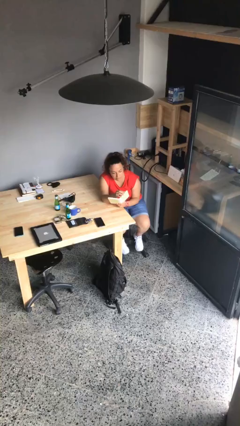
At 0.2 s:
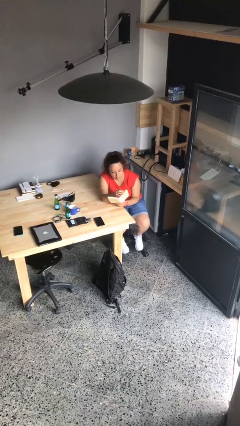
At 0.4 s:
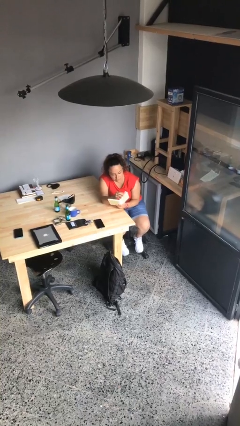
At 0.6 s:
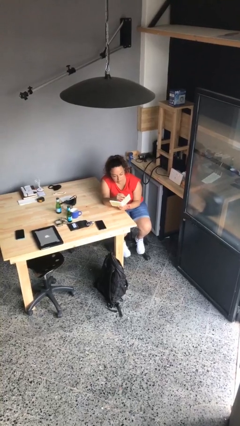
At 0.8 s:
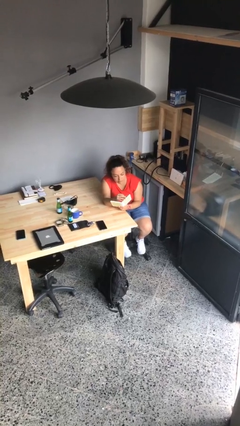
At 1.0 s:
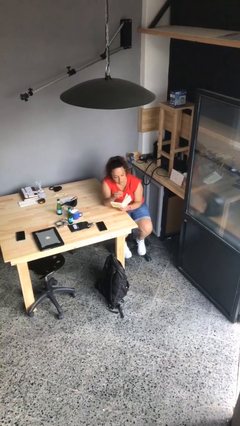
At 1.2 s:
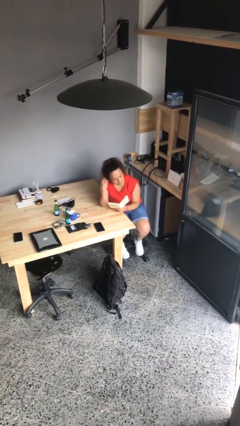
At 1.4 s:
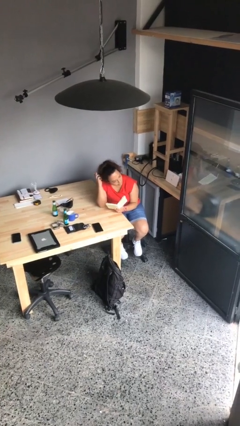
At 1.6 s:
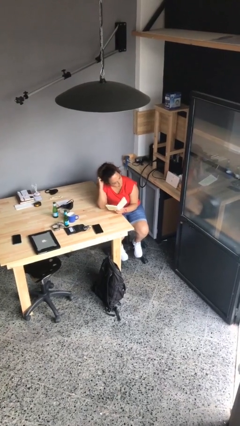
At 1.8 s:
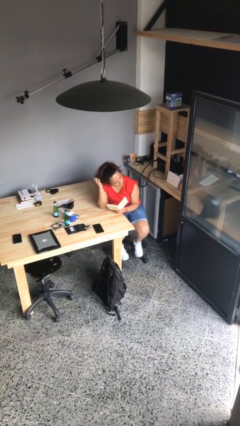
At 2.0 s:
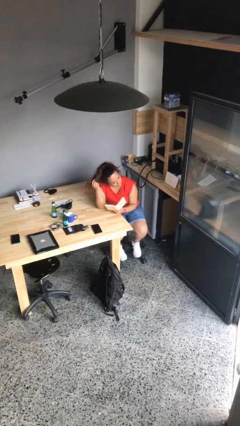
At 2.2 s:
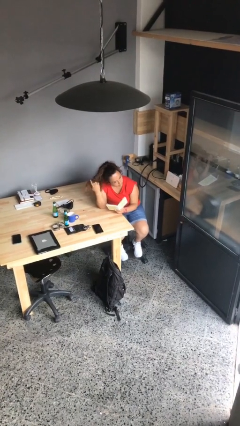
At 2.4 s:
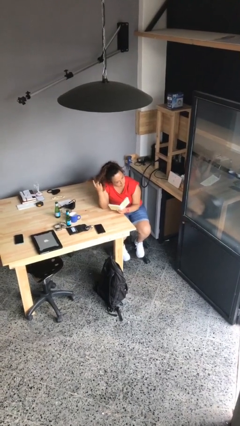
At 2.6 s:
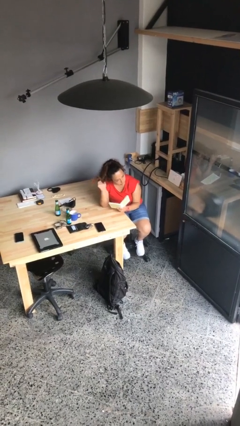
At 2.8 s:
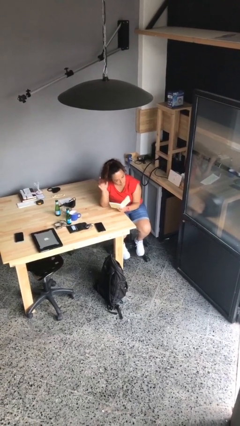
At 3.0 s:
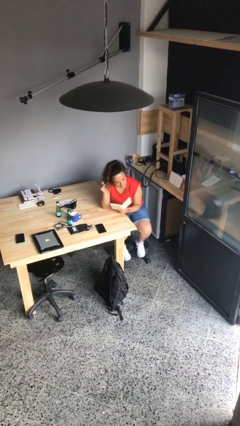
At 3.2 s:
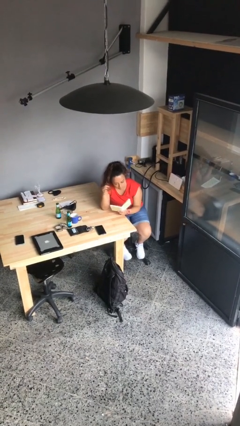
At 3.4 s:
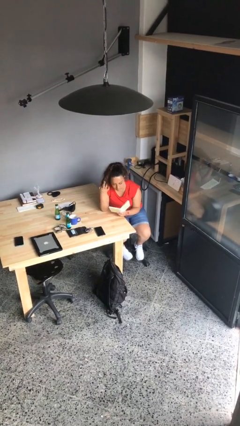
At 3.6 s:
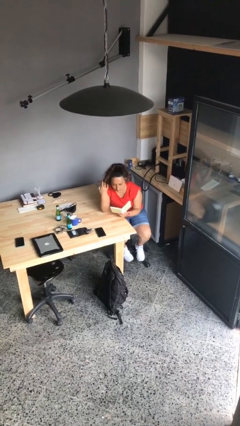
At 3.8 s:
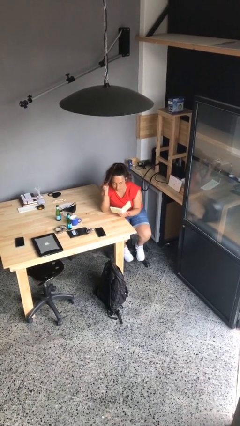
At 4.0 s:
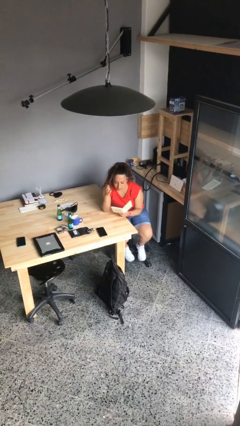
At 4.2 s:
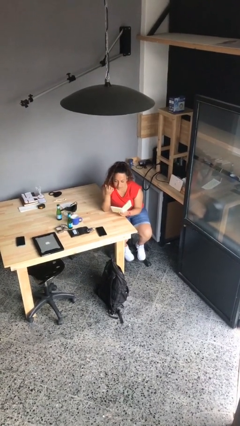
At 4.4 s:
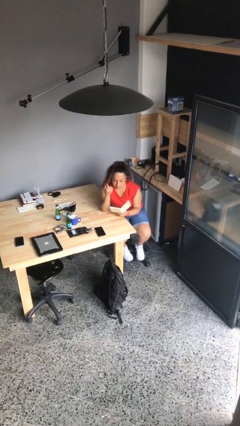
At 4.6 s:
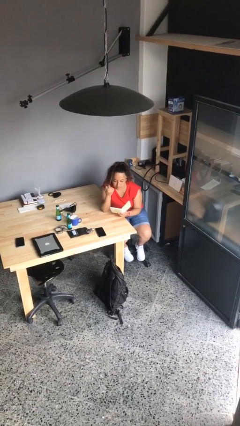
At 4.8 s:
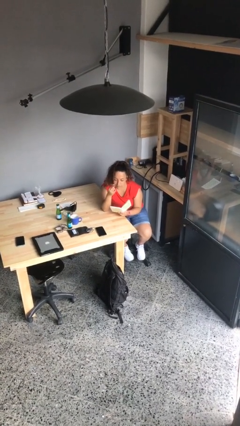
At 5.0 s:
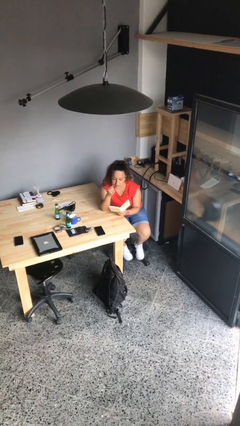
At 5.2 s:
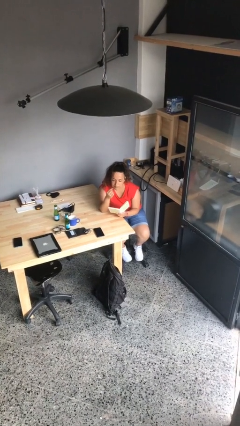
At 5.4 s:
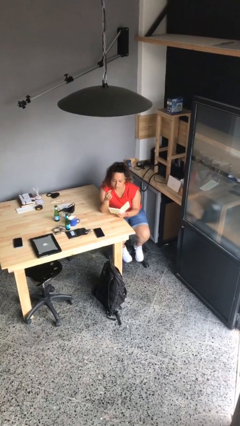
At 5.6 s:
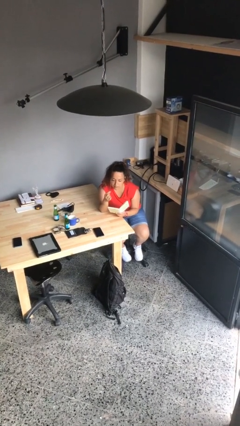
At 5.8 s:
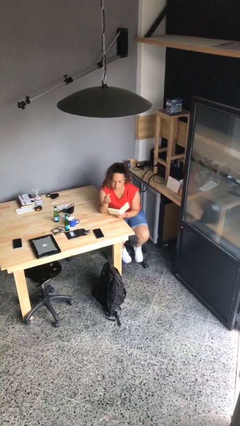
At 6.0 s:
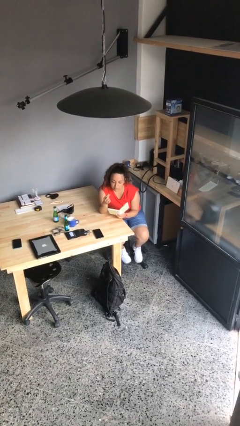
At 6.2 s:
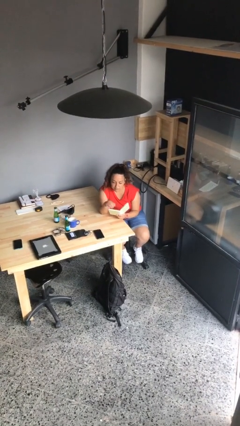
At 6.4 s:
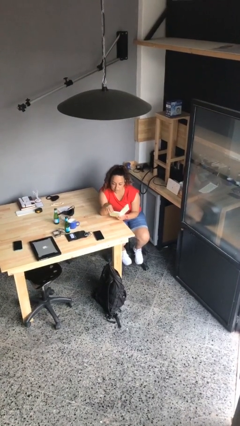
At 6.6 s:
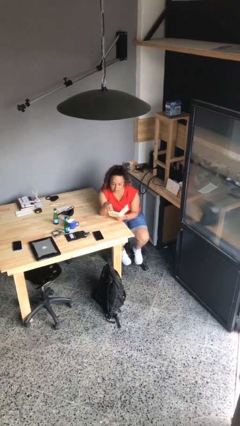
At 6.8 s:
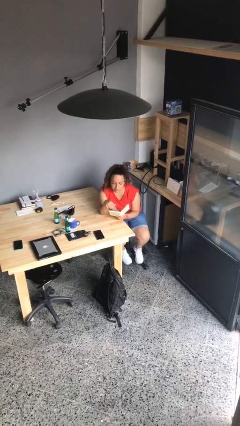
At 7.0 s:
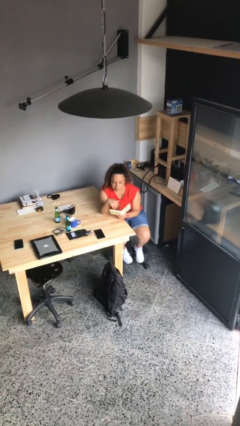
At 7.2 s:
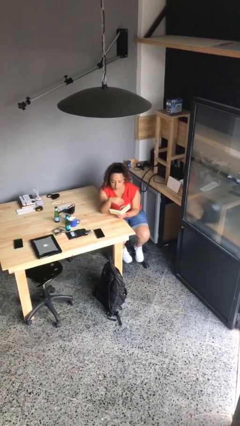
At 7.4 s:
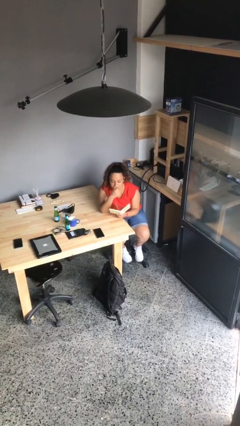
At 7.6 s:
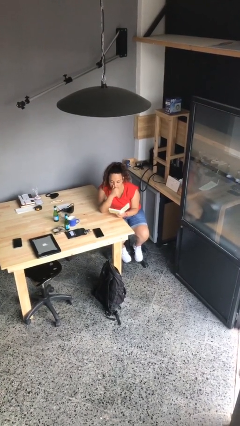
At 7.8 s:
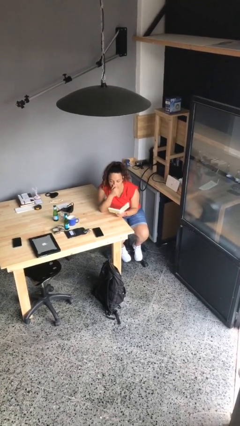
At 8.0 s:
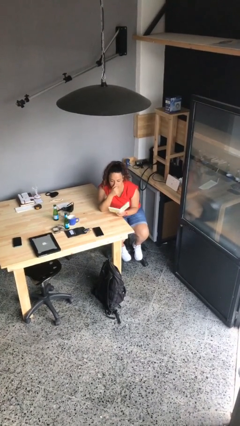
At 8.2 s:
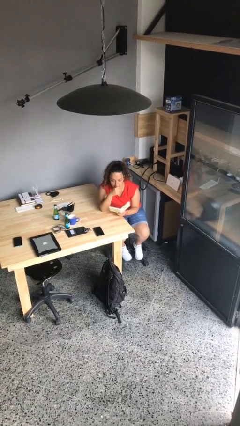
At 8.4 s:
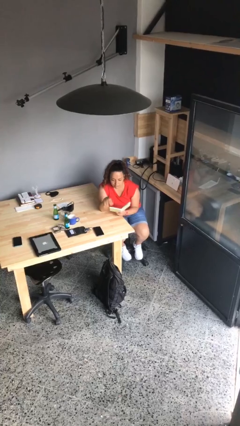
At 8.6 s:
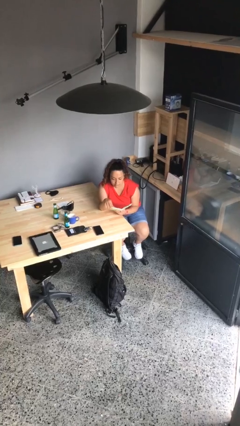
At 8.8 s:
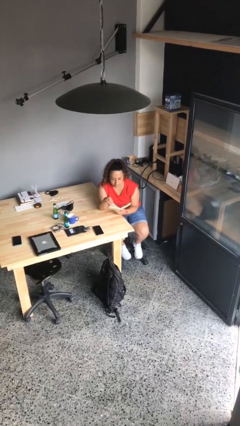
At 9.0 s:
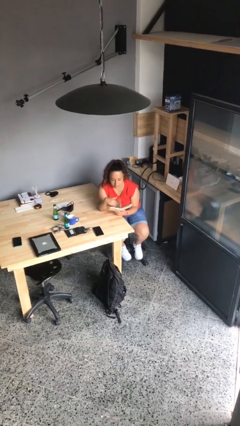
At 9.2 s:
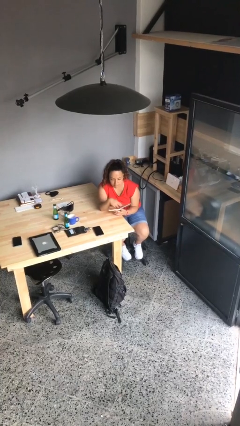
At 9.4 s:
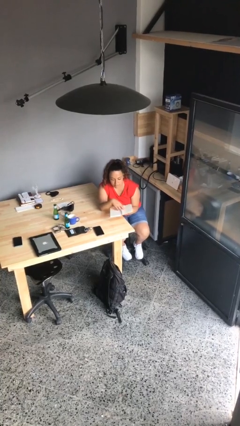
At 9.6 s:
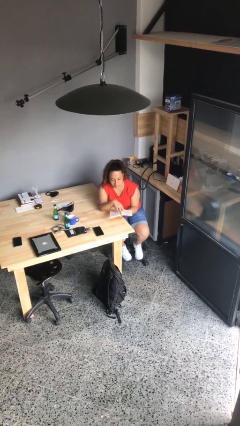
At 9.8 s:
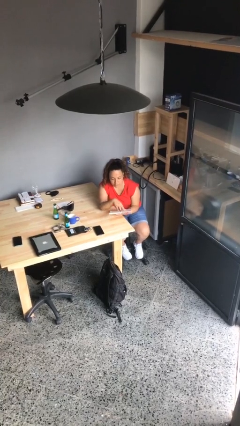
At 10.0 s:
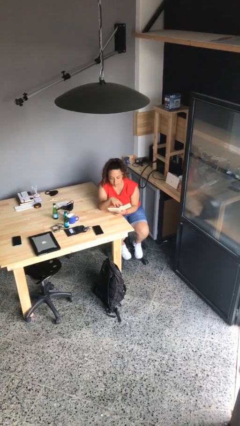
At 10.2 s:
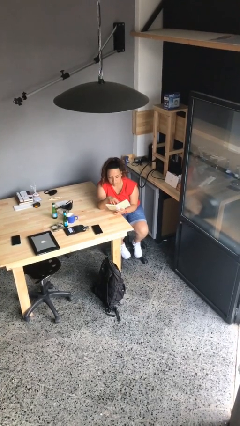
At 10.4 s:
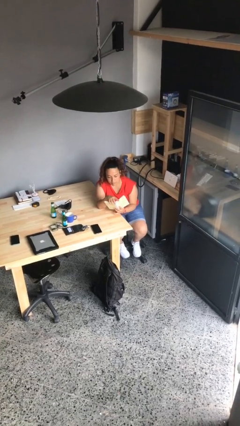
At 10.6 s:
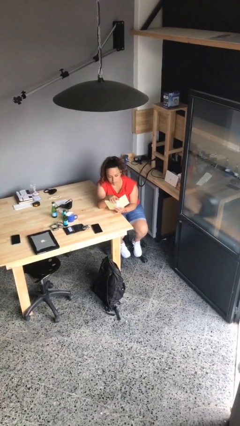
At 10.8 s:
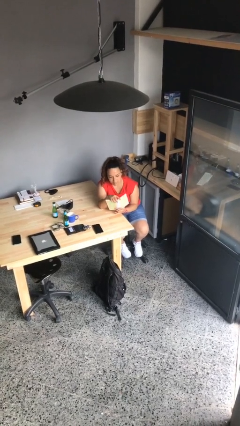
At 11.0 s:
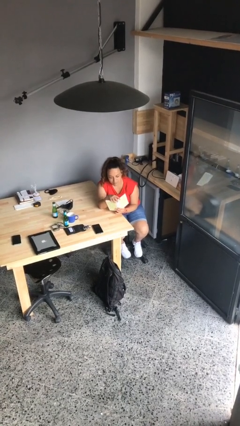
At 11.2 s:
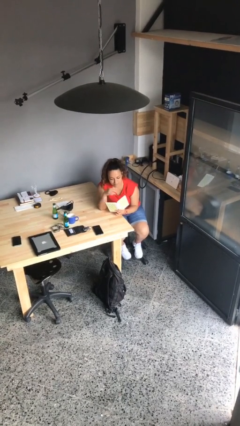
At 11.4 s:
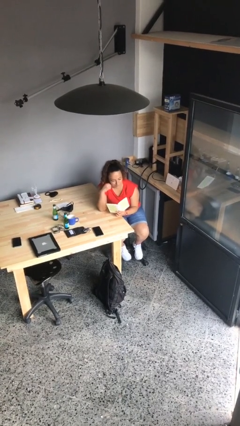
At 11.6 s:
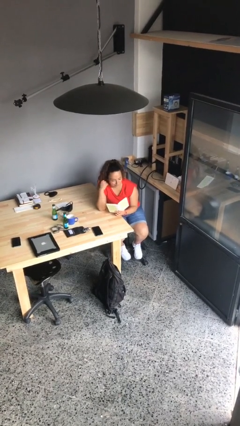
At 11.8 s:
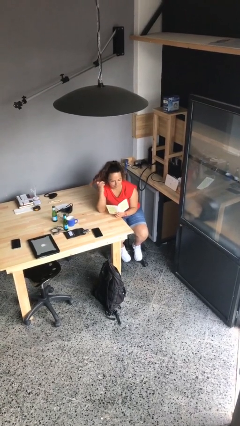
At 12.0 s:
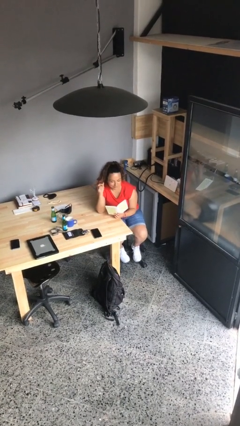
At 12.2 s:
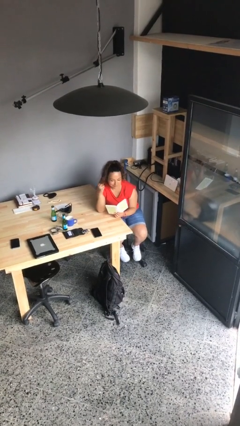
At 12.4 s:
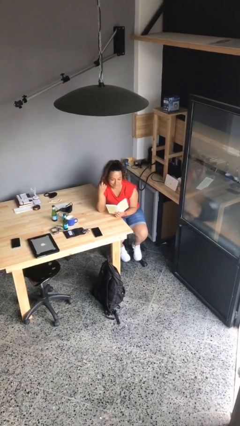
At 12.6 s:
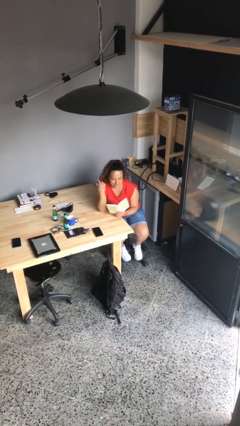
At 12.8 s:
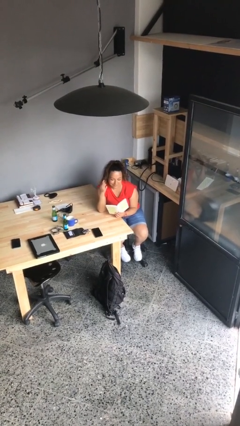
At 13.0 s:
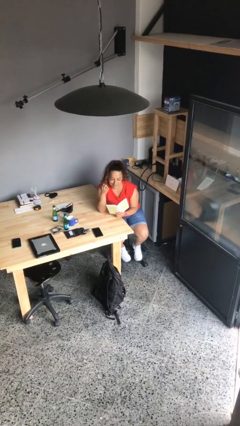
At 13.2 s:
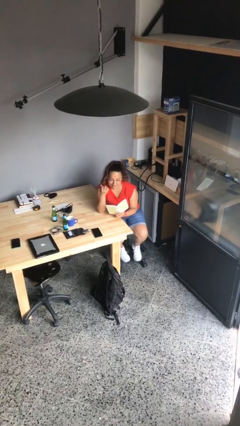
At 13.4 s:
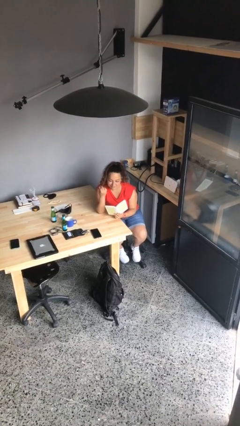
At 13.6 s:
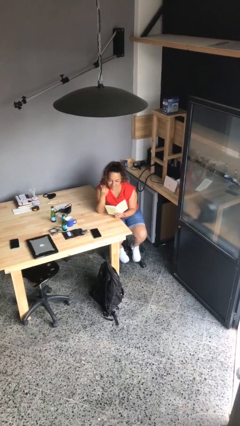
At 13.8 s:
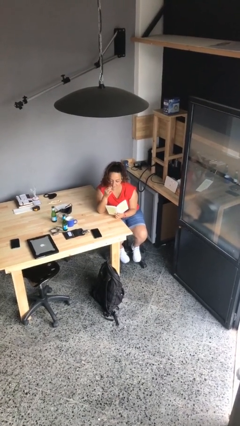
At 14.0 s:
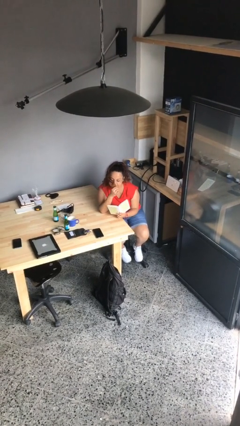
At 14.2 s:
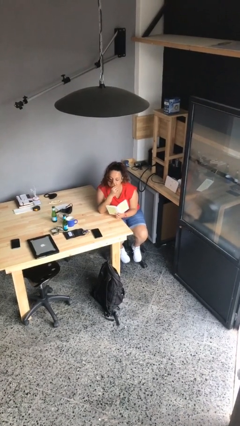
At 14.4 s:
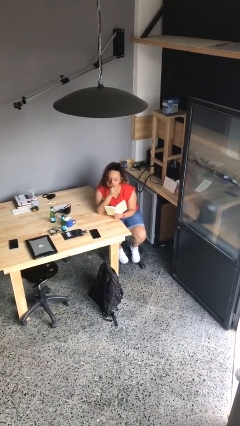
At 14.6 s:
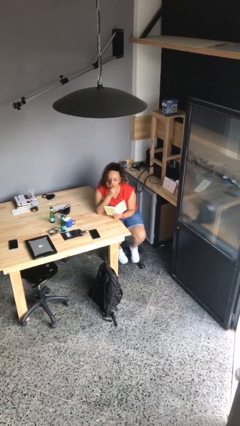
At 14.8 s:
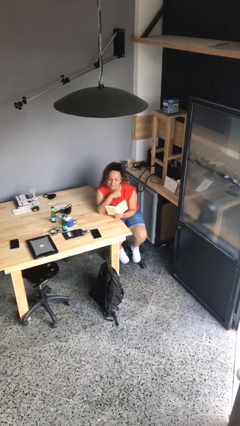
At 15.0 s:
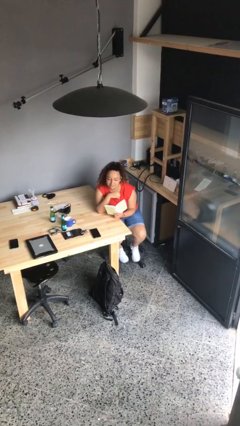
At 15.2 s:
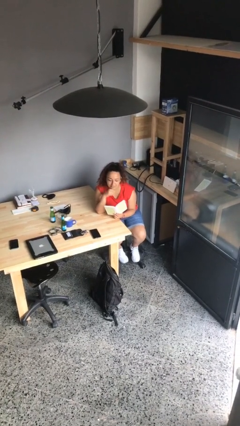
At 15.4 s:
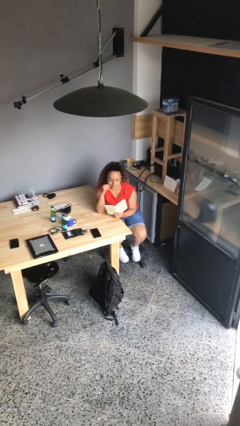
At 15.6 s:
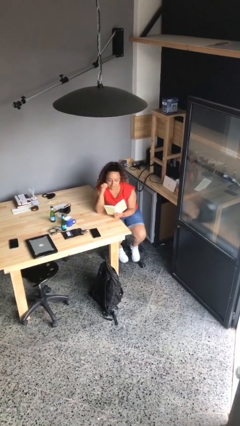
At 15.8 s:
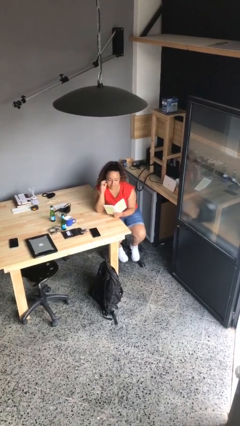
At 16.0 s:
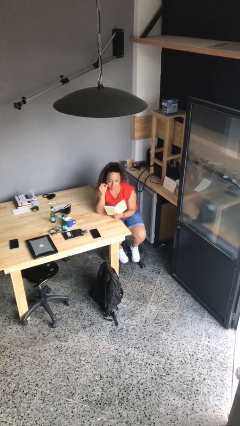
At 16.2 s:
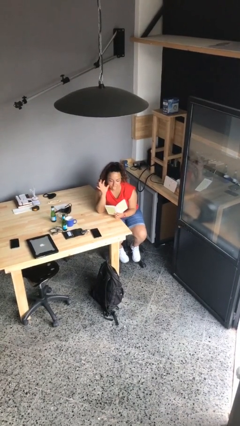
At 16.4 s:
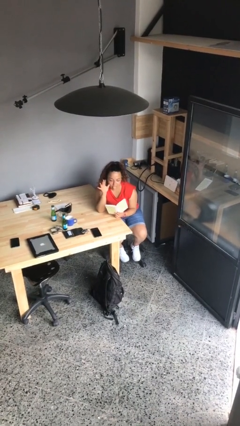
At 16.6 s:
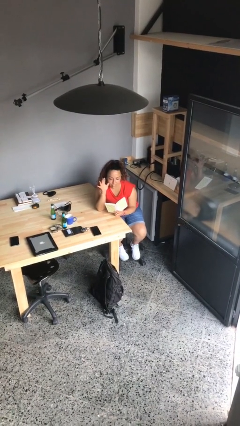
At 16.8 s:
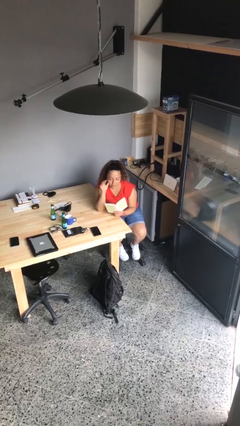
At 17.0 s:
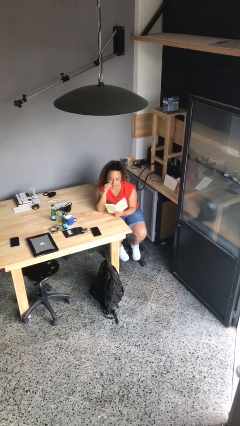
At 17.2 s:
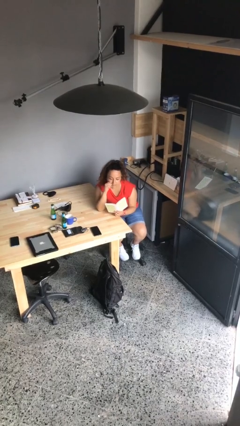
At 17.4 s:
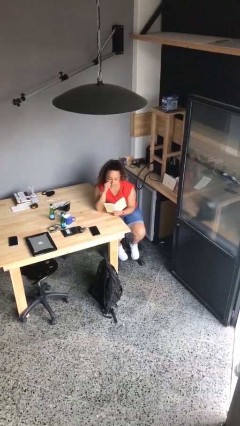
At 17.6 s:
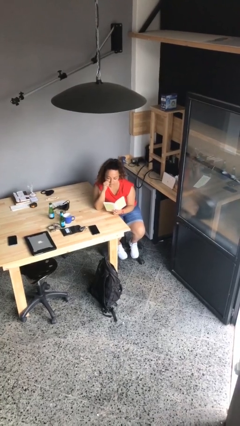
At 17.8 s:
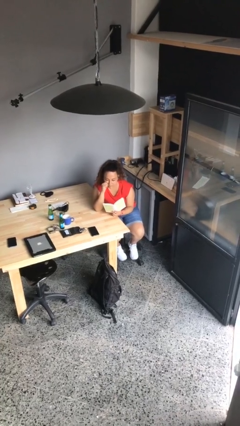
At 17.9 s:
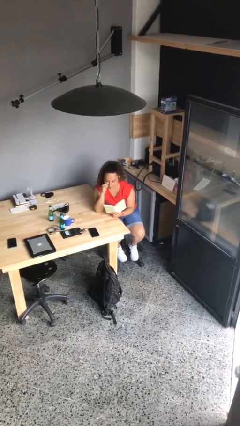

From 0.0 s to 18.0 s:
person reads document

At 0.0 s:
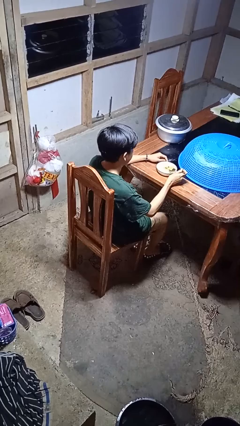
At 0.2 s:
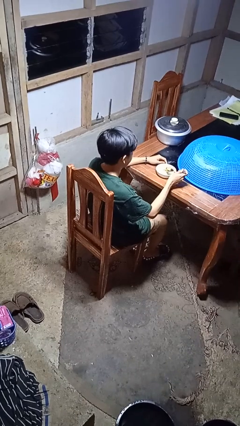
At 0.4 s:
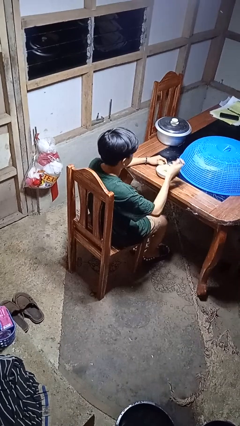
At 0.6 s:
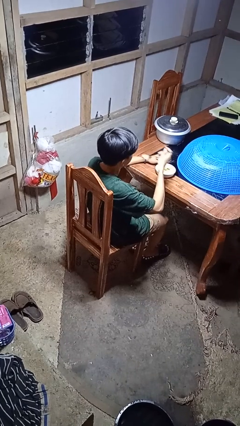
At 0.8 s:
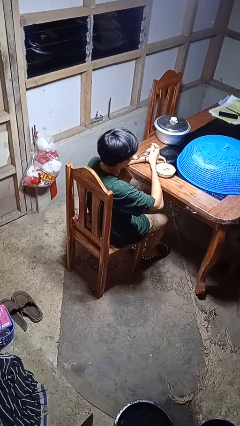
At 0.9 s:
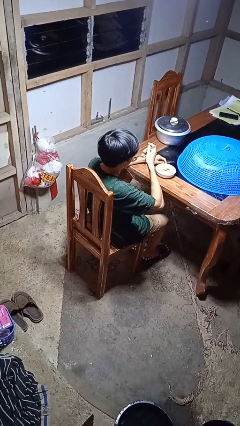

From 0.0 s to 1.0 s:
person eats with utensil
